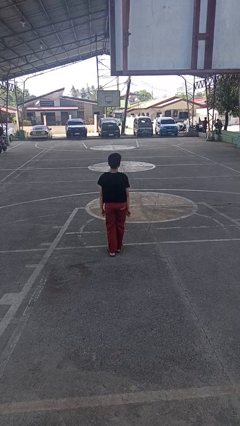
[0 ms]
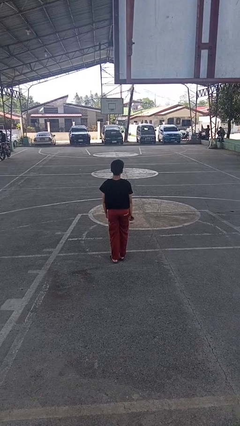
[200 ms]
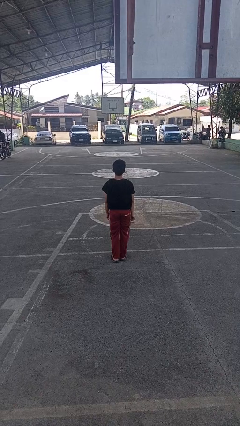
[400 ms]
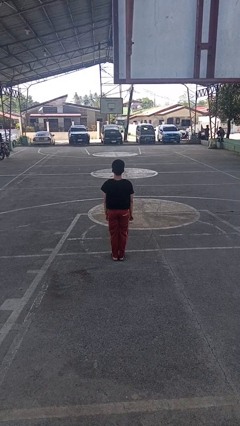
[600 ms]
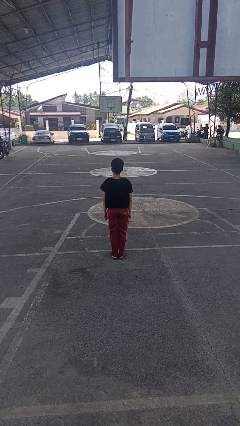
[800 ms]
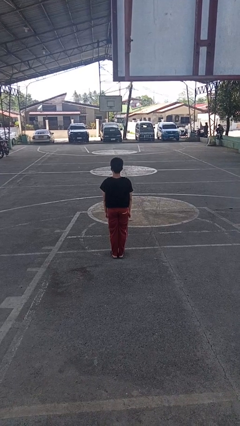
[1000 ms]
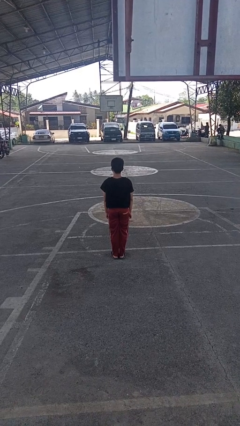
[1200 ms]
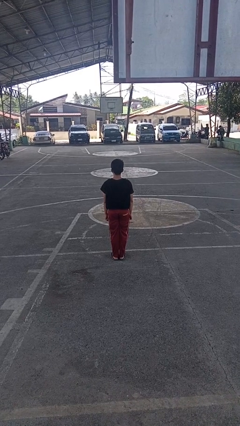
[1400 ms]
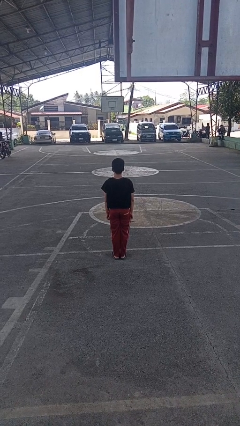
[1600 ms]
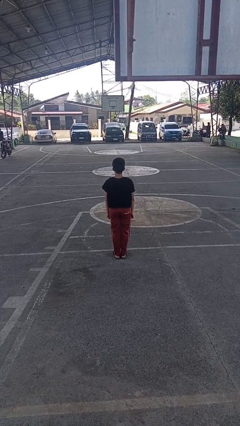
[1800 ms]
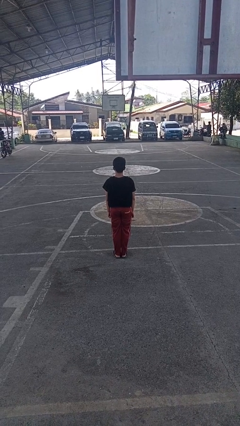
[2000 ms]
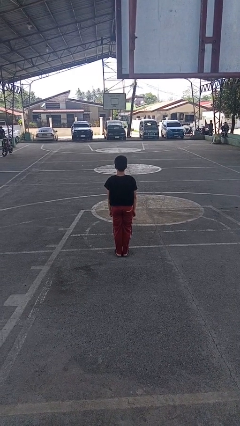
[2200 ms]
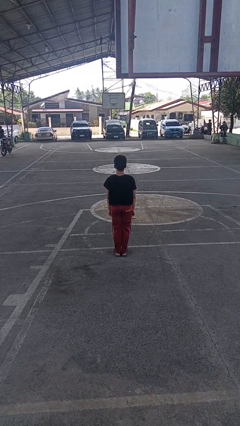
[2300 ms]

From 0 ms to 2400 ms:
person stands up from floor

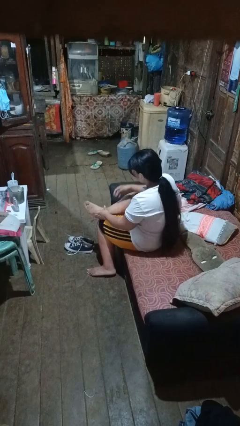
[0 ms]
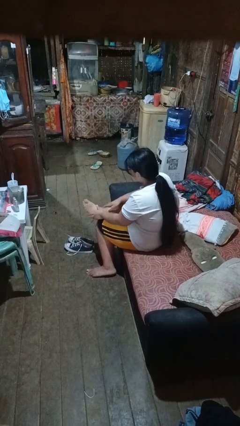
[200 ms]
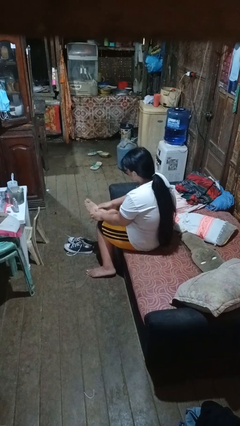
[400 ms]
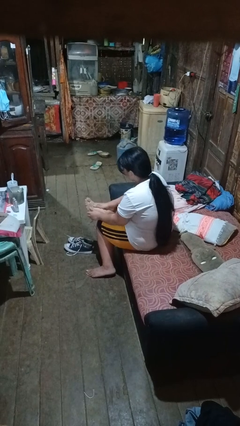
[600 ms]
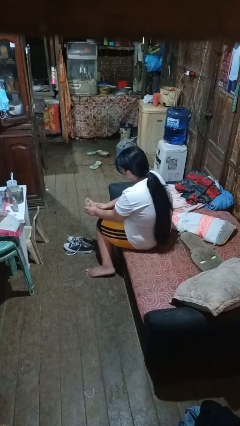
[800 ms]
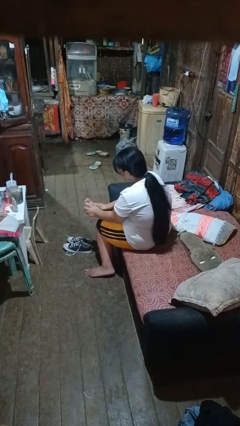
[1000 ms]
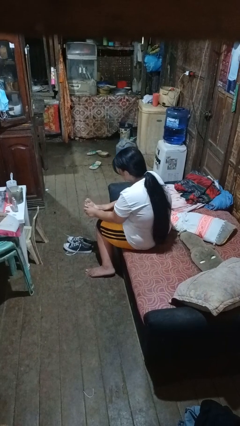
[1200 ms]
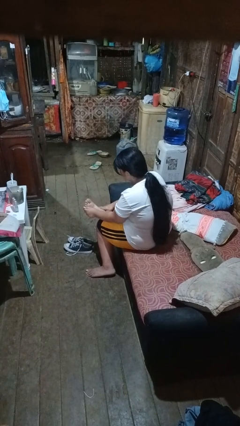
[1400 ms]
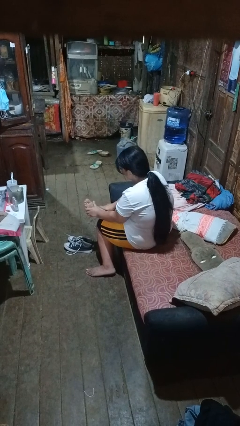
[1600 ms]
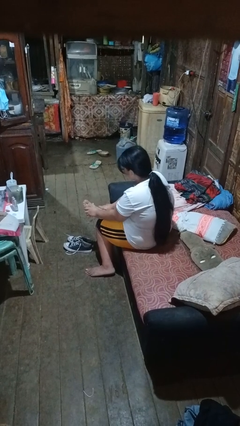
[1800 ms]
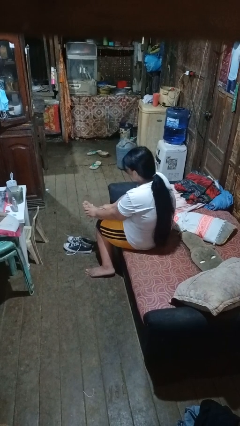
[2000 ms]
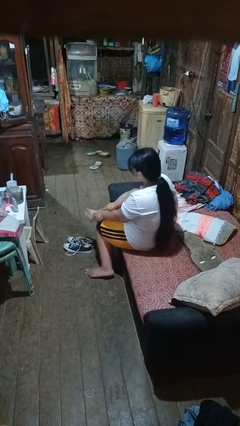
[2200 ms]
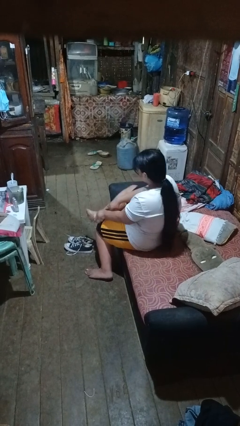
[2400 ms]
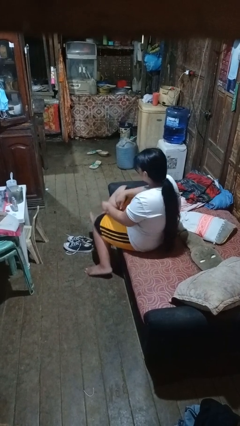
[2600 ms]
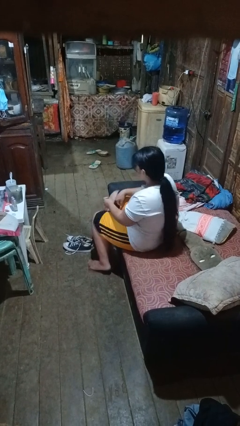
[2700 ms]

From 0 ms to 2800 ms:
person rubs foot

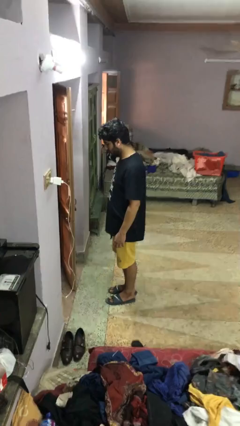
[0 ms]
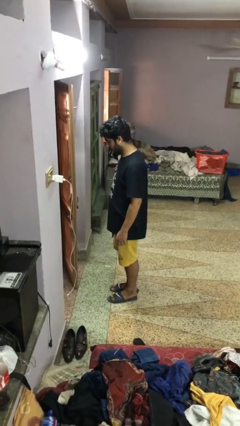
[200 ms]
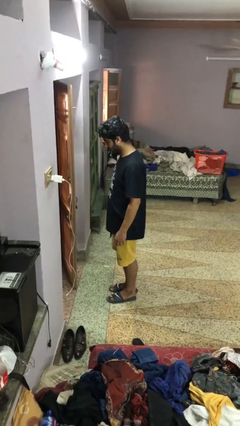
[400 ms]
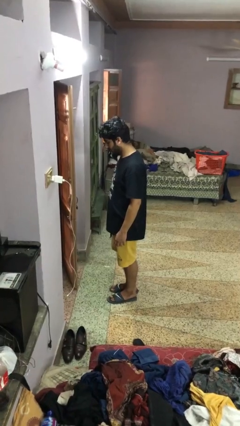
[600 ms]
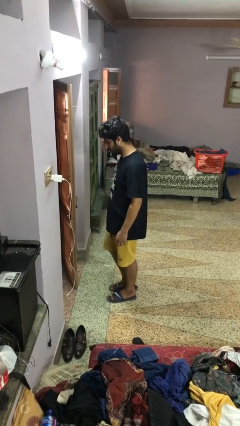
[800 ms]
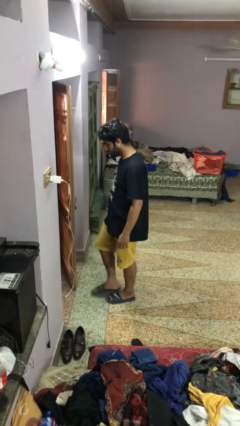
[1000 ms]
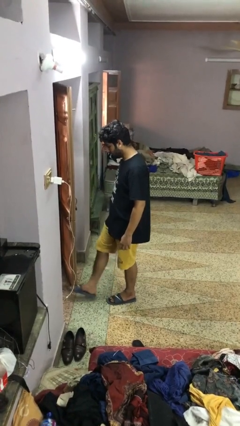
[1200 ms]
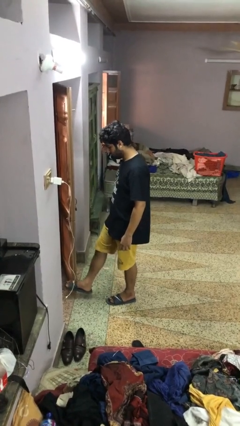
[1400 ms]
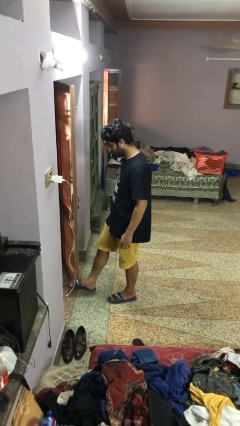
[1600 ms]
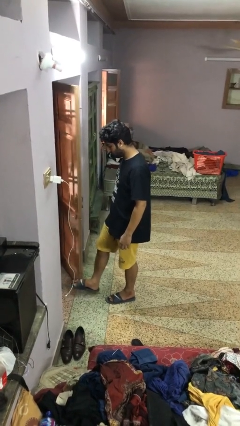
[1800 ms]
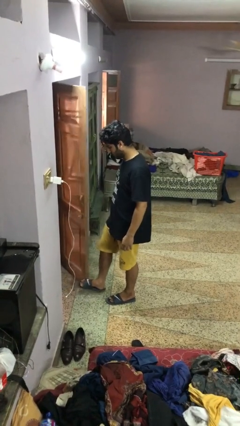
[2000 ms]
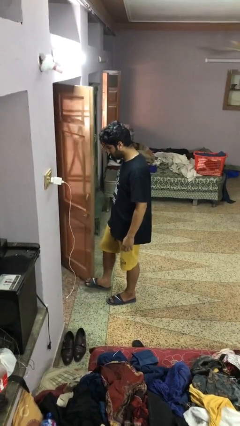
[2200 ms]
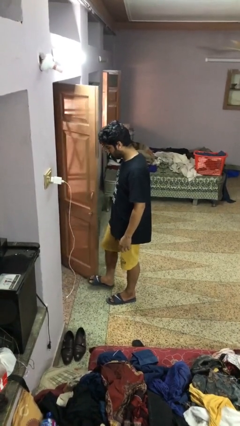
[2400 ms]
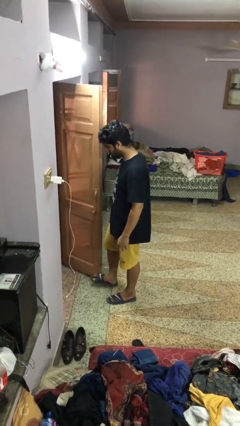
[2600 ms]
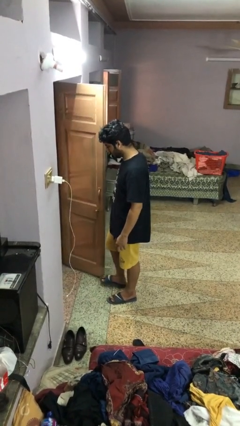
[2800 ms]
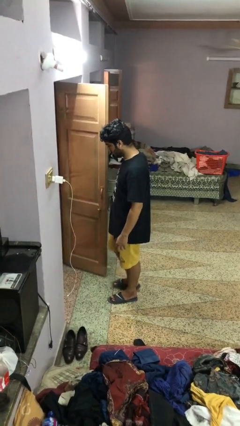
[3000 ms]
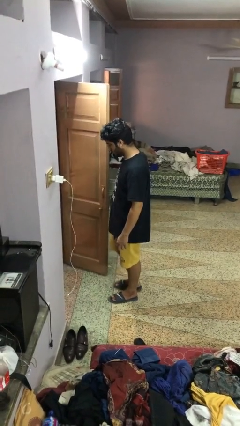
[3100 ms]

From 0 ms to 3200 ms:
person opens facility door

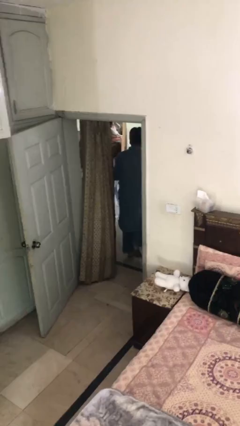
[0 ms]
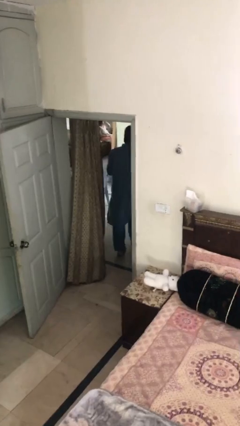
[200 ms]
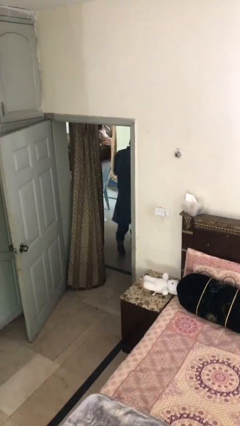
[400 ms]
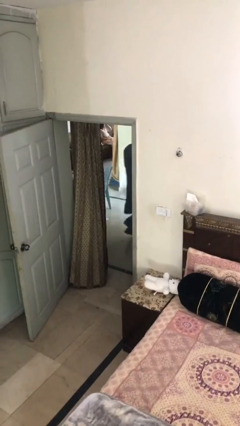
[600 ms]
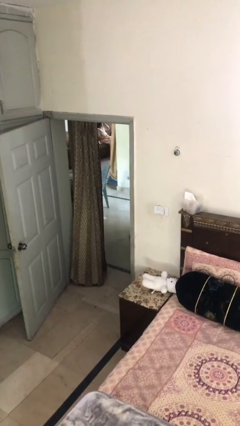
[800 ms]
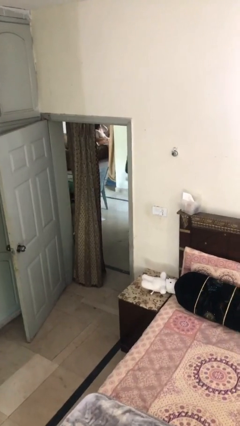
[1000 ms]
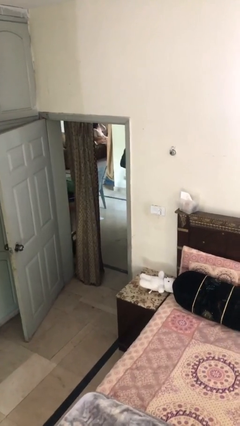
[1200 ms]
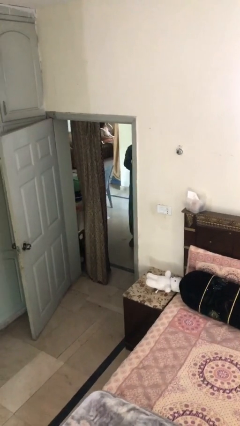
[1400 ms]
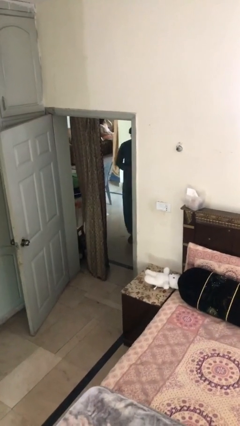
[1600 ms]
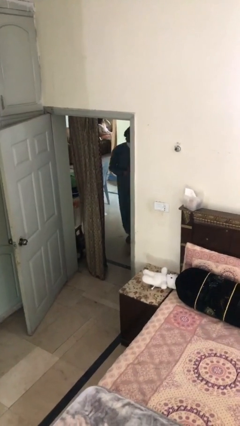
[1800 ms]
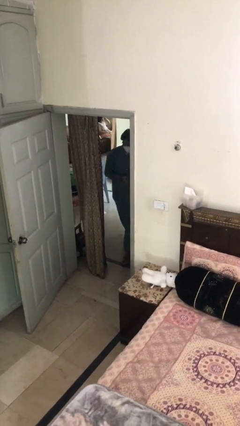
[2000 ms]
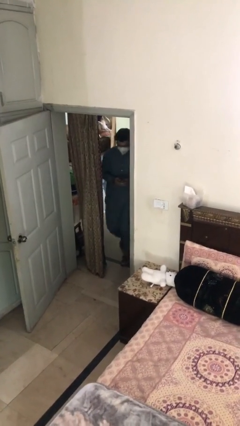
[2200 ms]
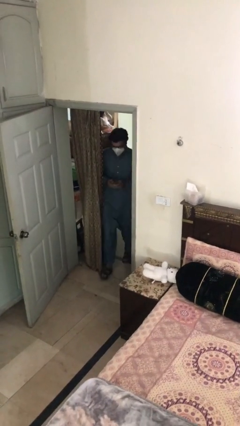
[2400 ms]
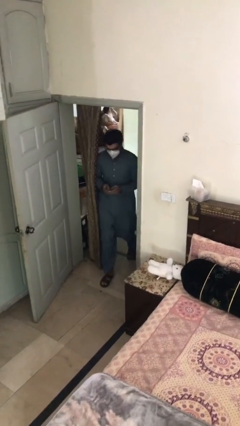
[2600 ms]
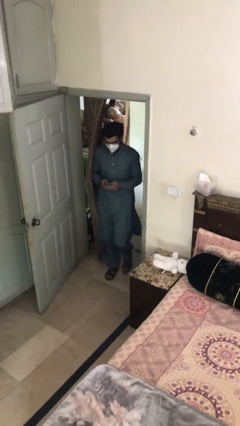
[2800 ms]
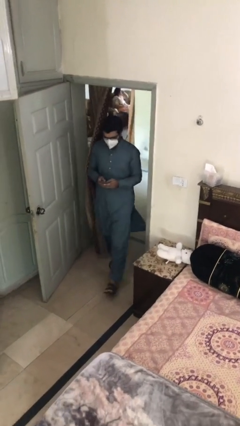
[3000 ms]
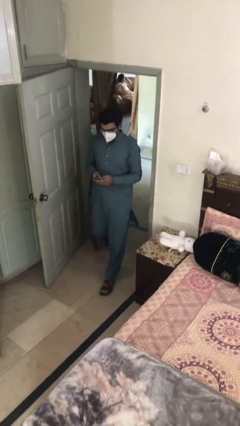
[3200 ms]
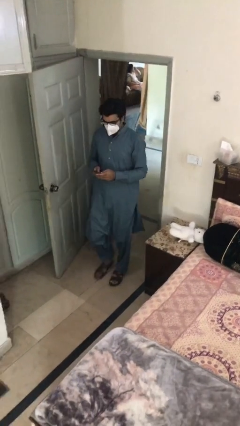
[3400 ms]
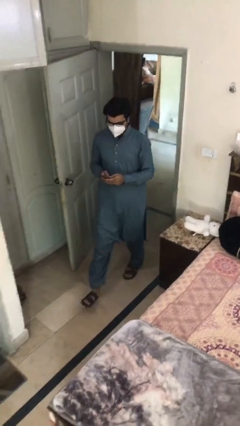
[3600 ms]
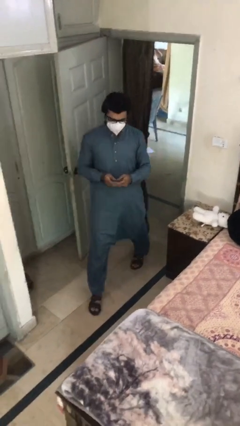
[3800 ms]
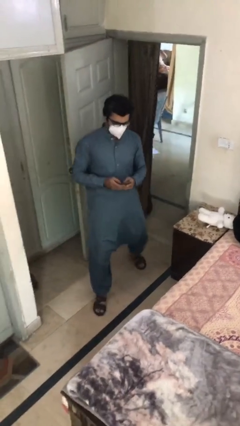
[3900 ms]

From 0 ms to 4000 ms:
person enters scene through structure

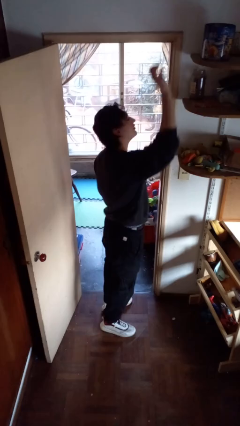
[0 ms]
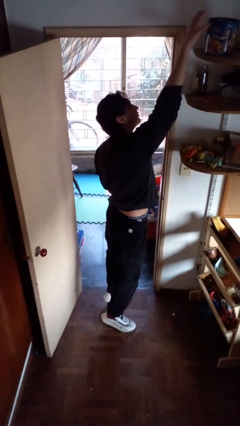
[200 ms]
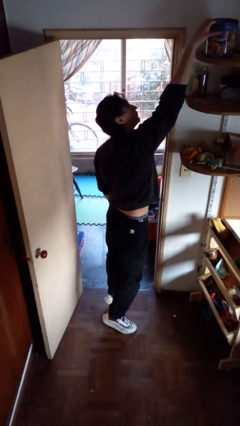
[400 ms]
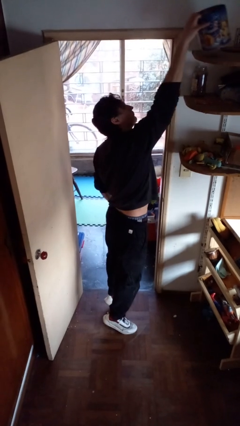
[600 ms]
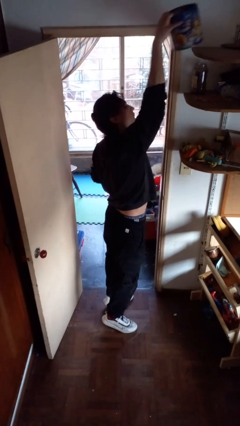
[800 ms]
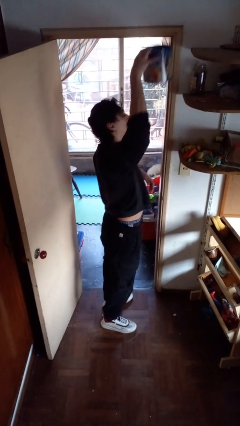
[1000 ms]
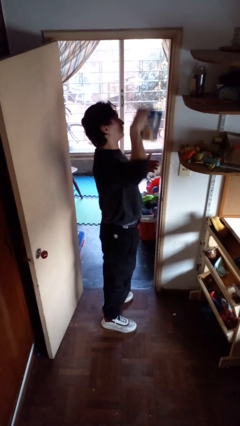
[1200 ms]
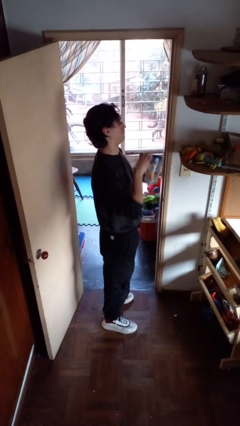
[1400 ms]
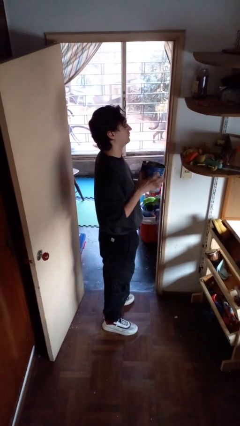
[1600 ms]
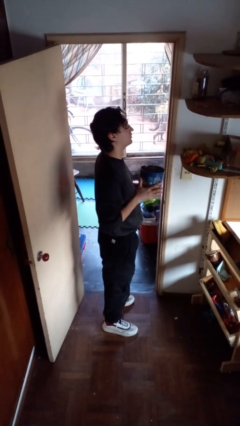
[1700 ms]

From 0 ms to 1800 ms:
person picks up object from shelf

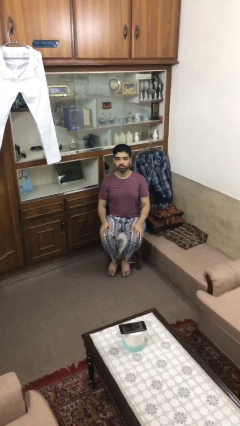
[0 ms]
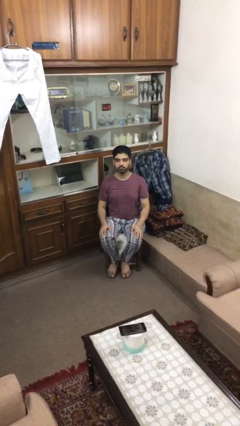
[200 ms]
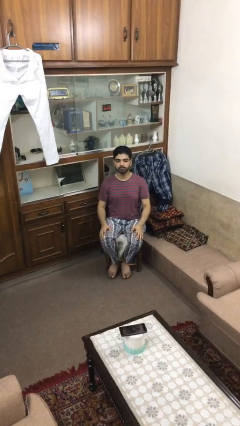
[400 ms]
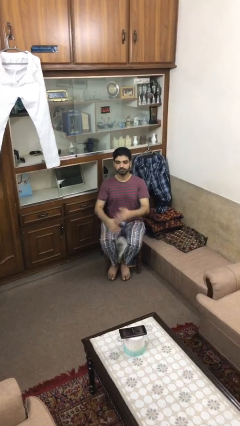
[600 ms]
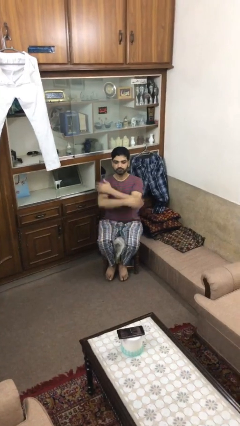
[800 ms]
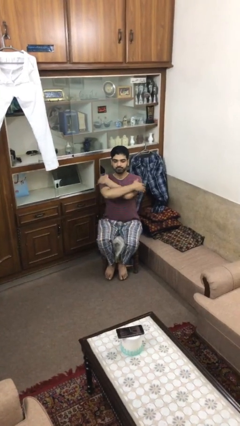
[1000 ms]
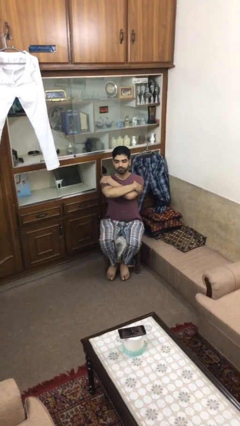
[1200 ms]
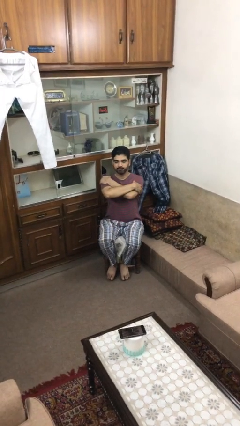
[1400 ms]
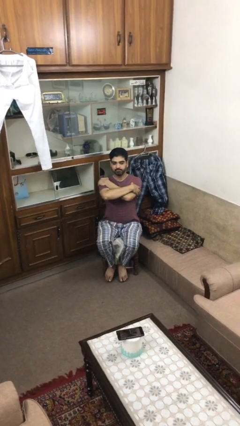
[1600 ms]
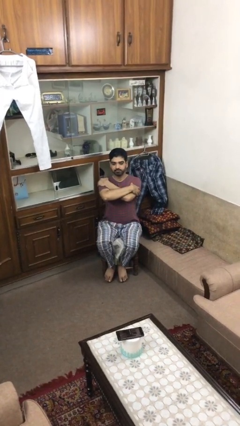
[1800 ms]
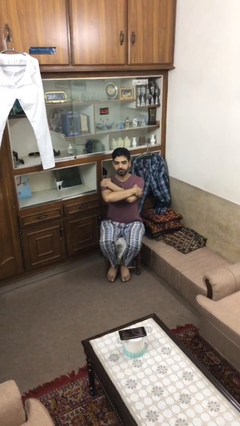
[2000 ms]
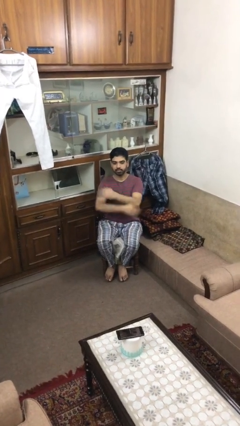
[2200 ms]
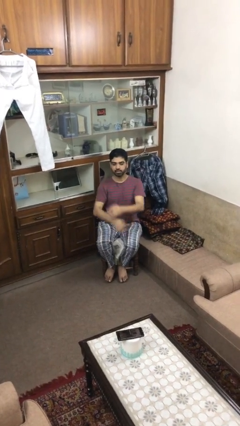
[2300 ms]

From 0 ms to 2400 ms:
person crosses arms

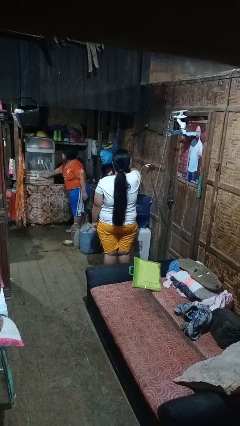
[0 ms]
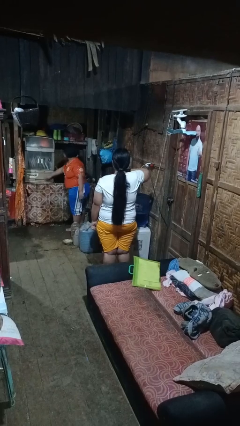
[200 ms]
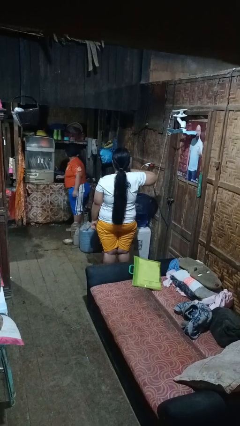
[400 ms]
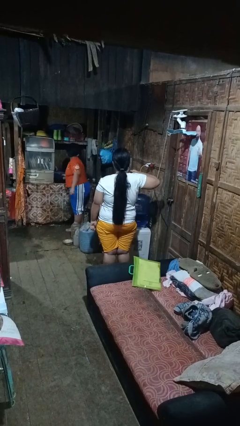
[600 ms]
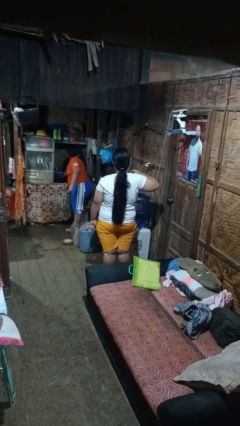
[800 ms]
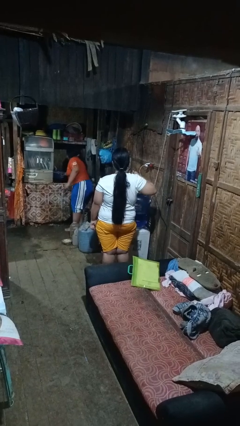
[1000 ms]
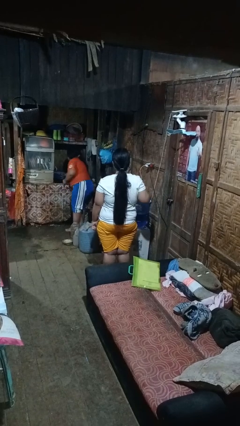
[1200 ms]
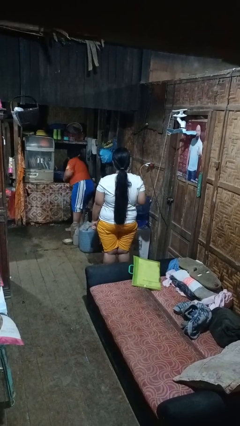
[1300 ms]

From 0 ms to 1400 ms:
person gestures cut
